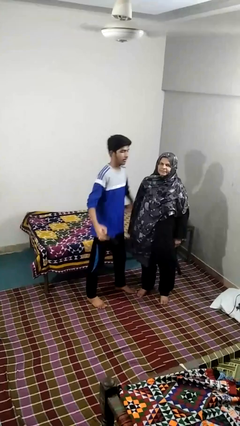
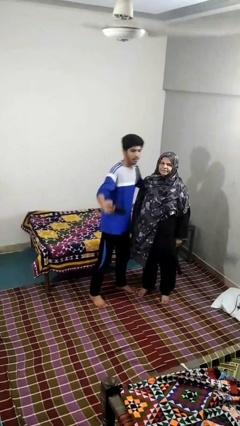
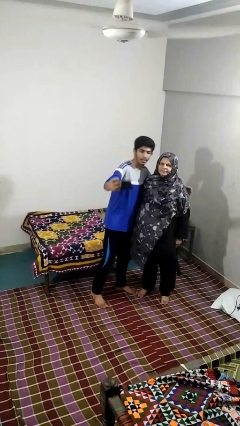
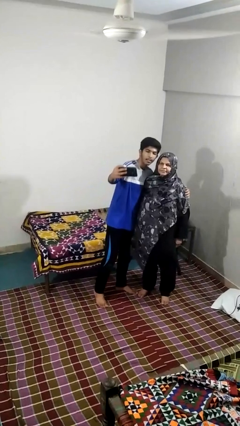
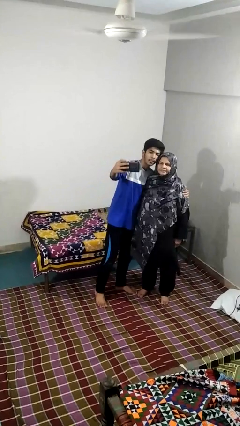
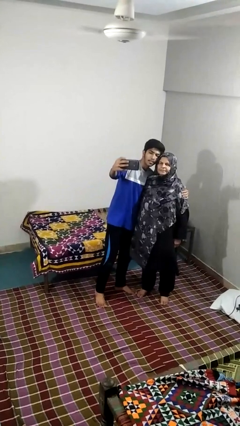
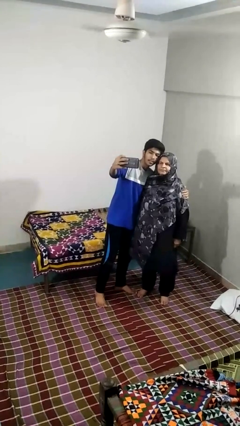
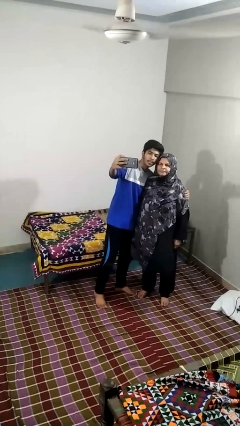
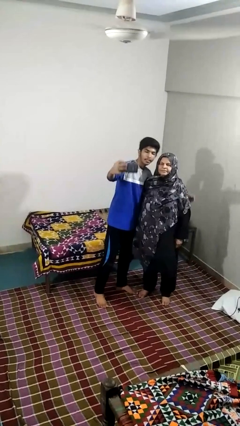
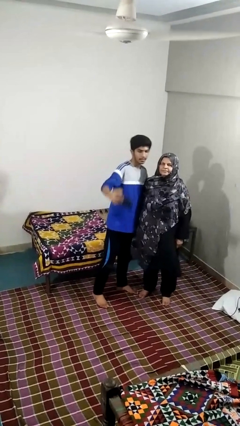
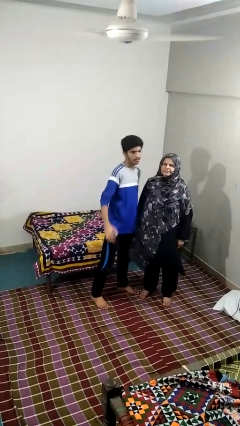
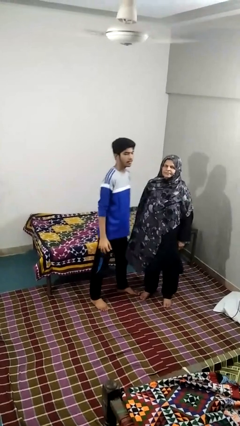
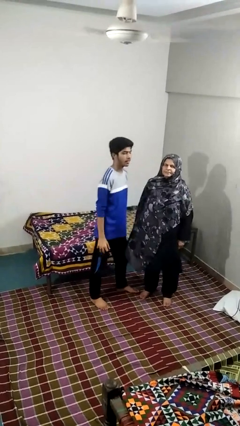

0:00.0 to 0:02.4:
person takes selfie with person

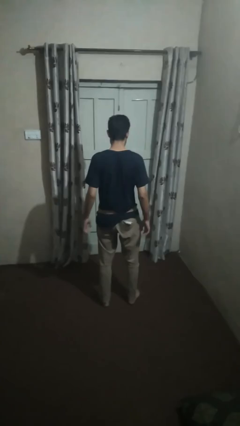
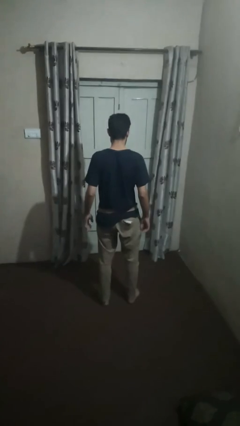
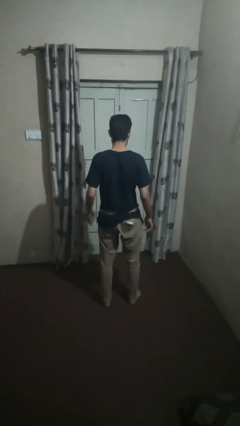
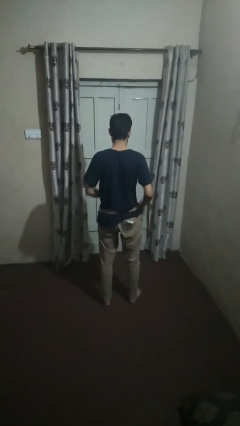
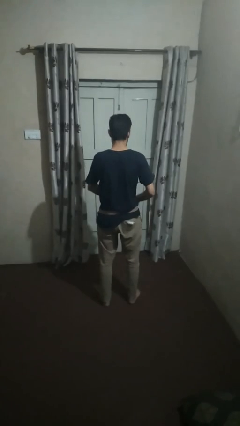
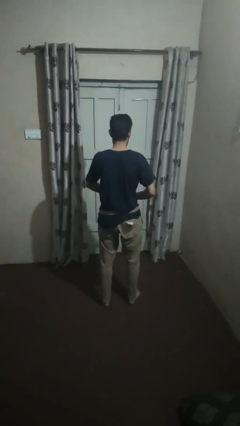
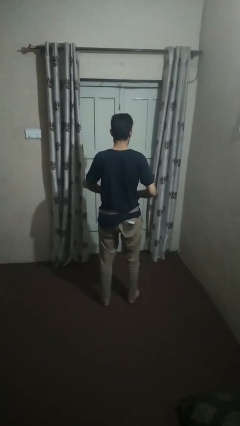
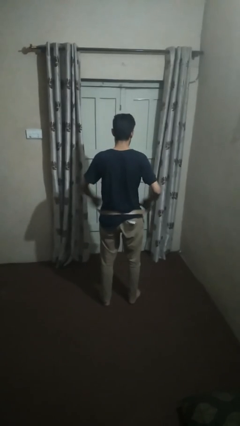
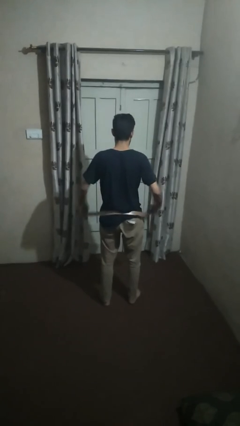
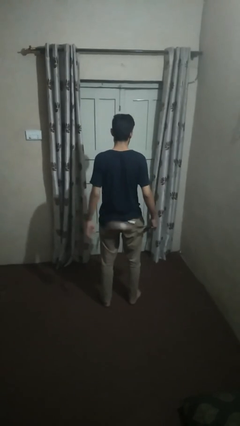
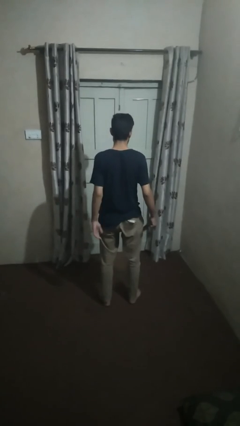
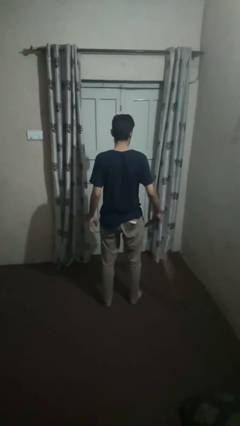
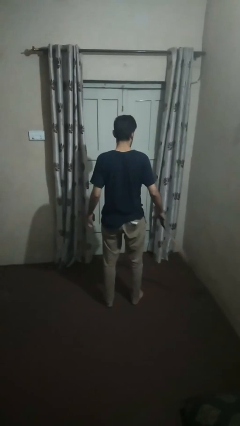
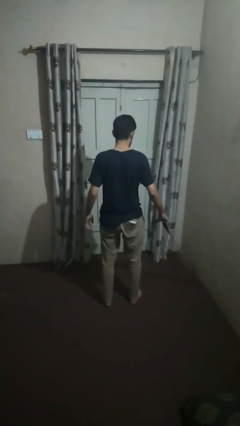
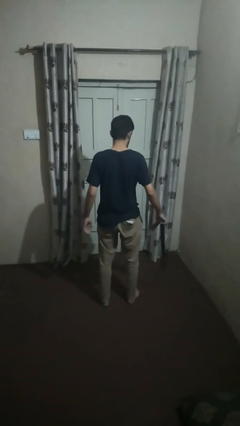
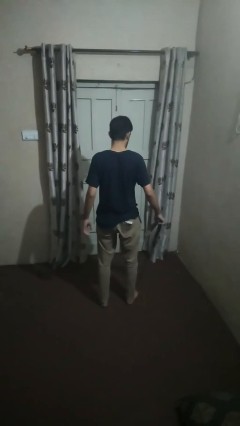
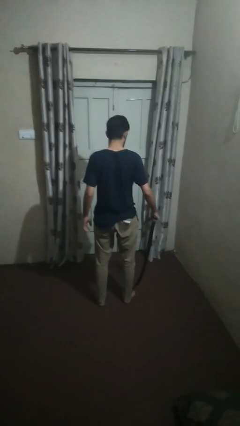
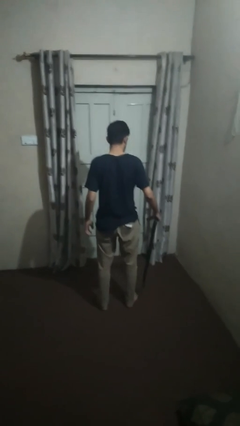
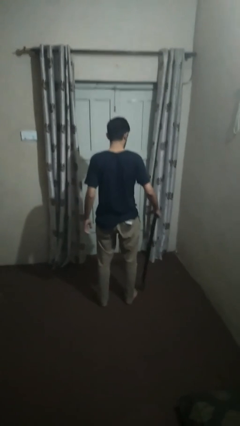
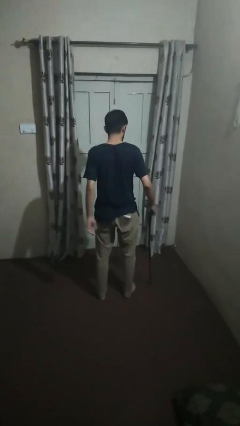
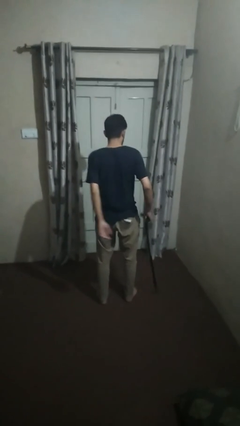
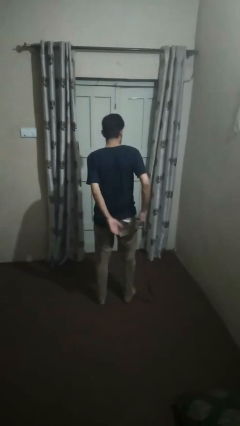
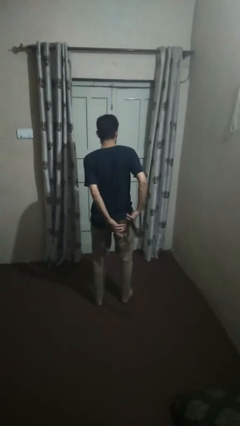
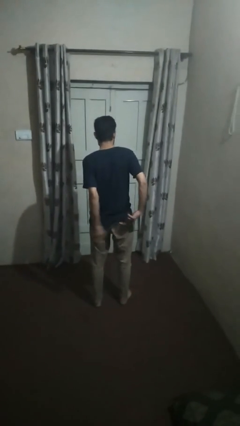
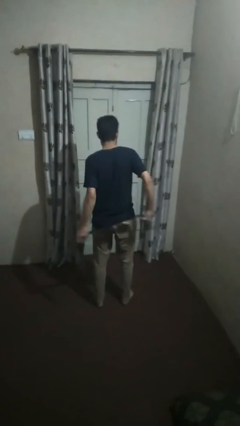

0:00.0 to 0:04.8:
person takes off belt

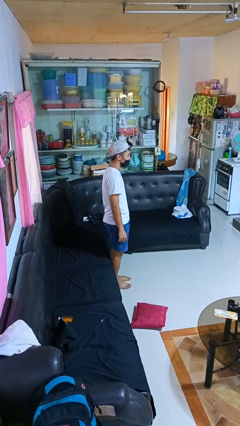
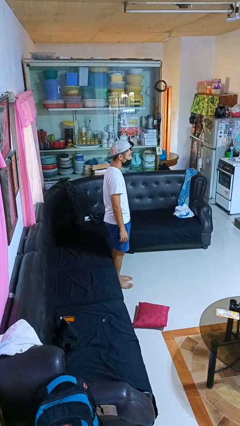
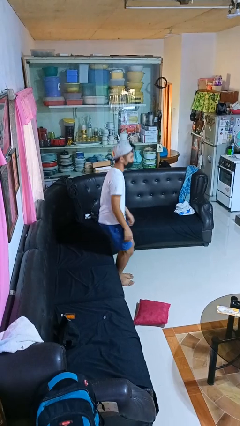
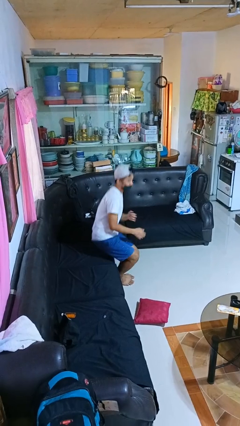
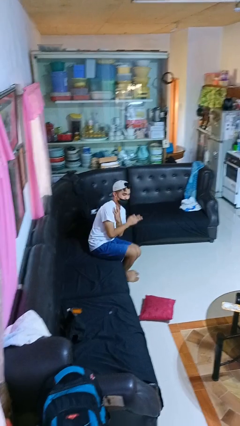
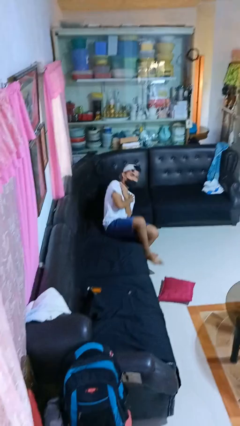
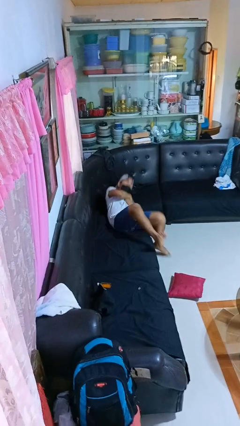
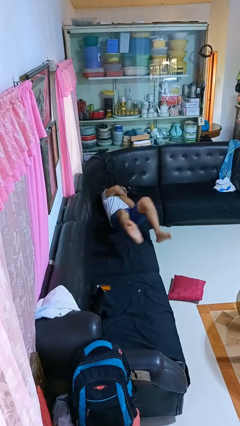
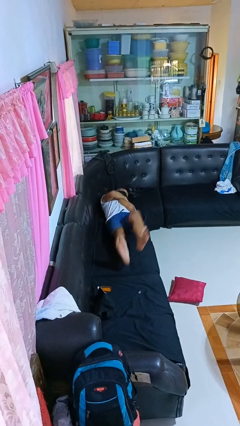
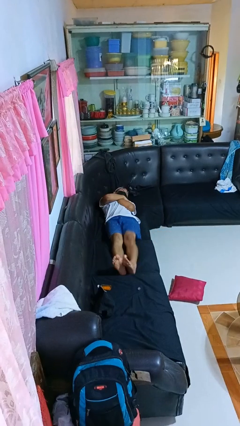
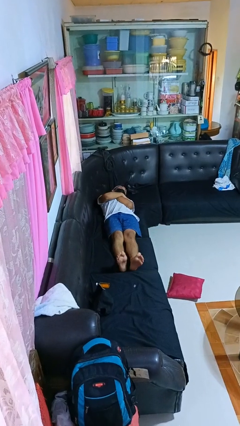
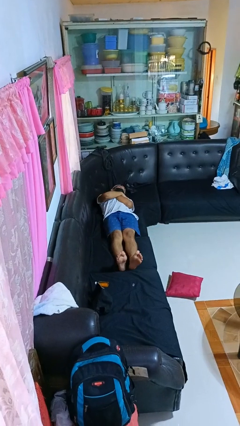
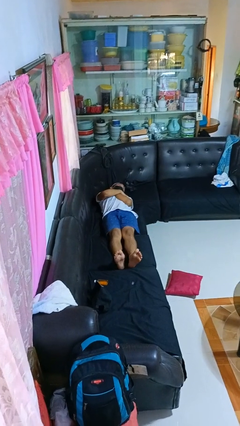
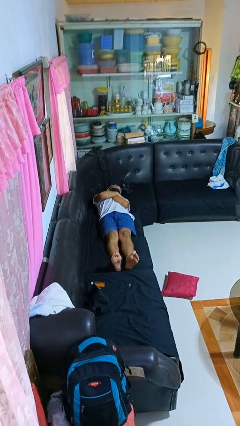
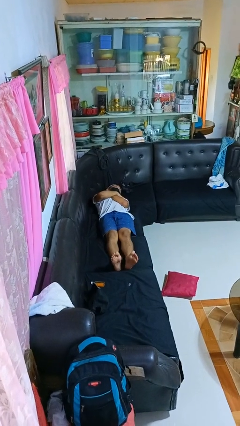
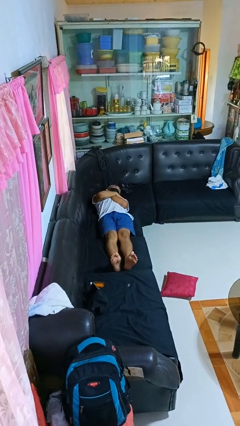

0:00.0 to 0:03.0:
person lies down on couch

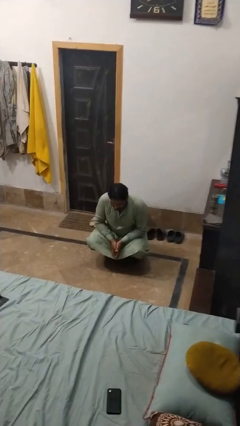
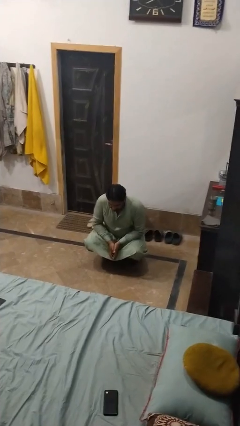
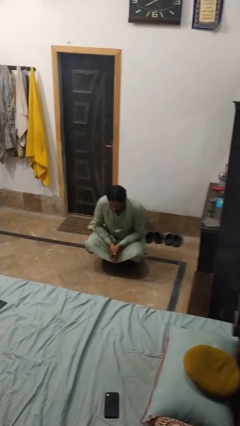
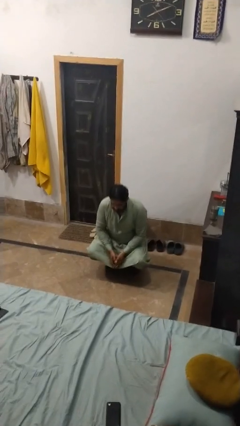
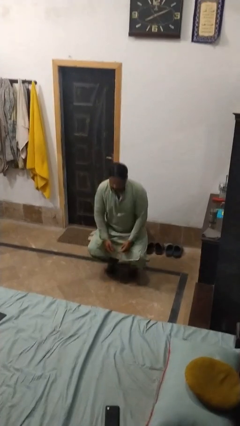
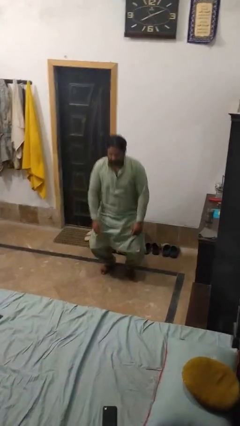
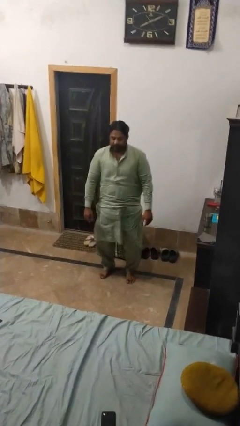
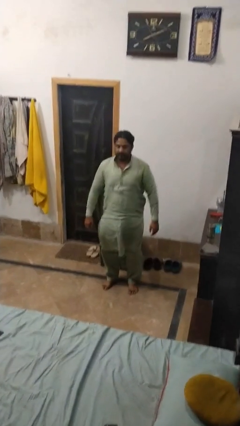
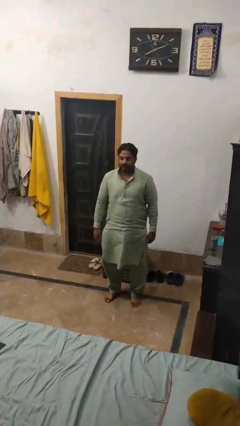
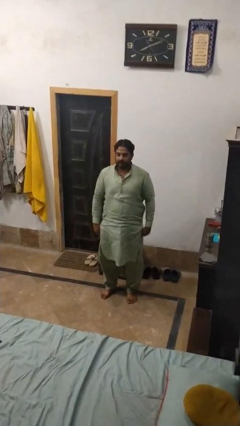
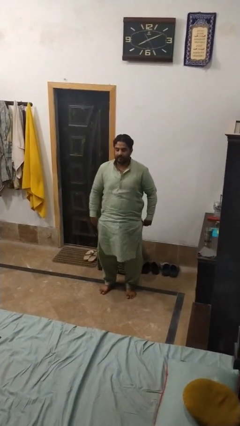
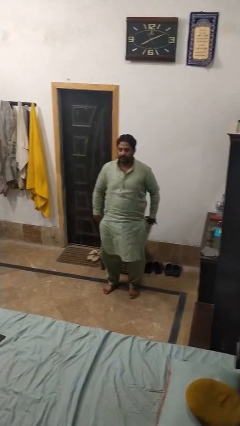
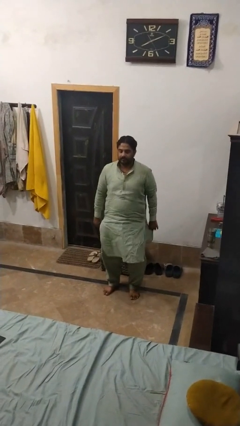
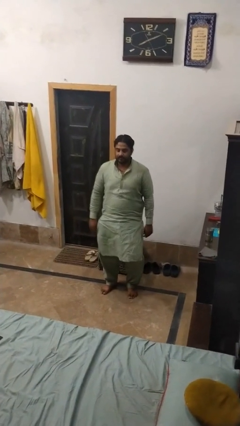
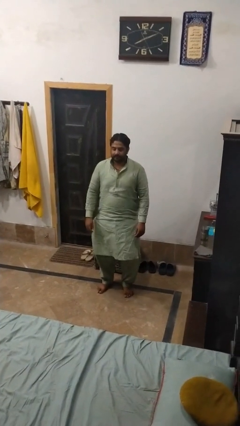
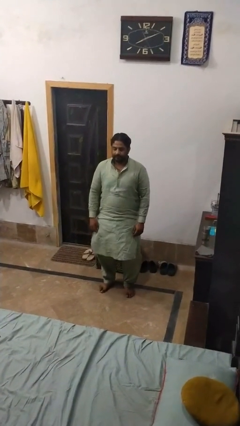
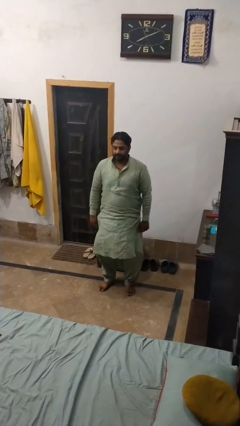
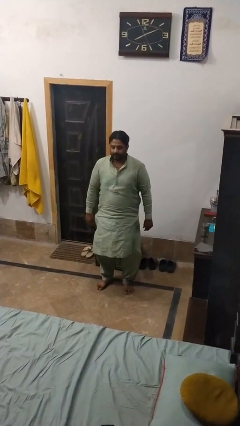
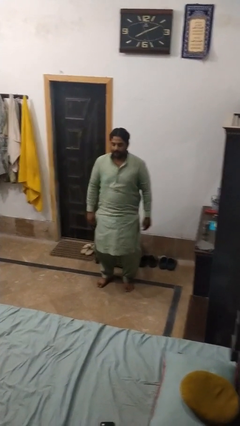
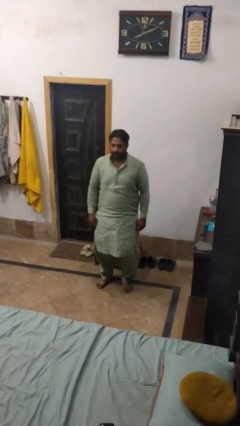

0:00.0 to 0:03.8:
person stands up

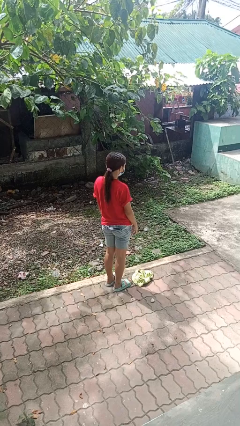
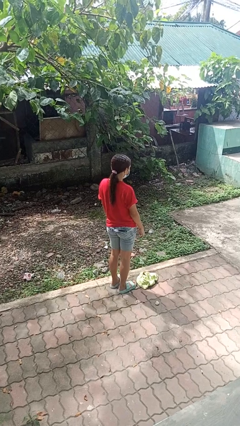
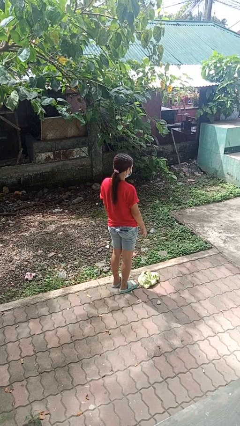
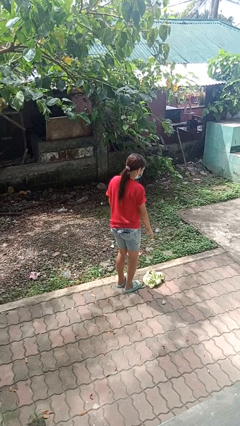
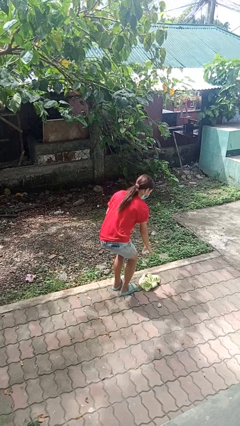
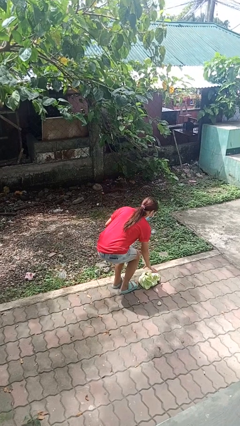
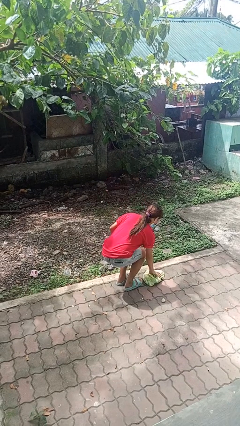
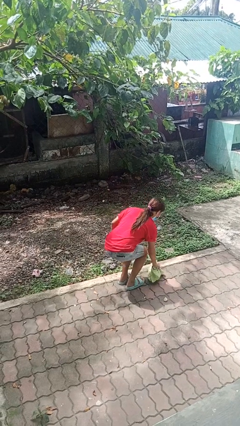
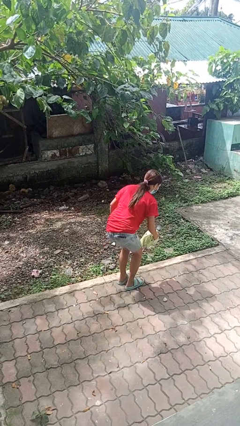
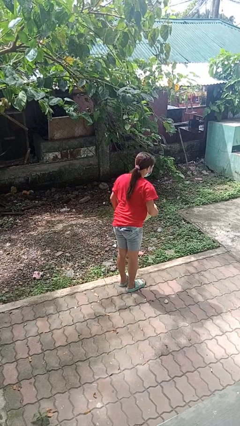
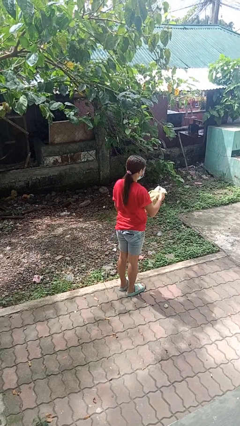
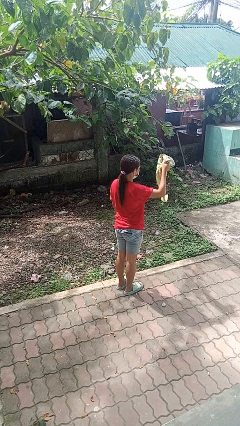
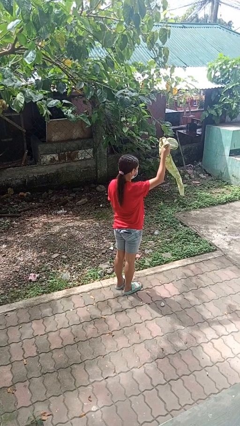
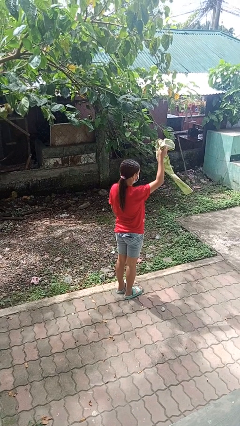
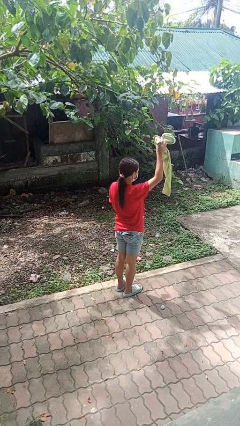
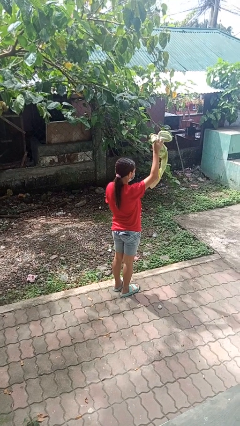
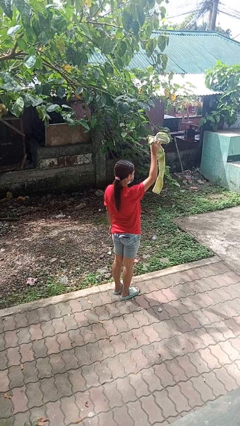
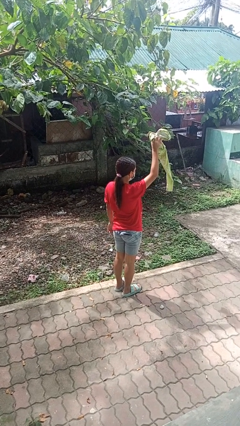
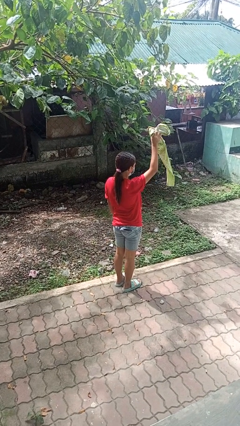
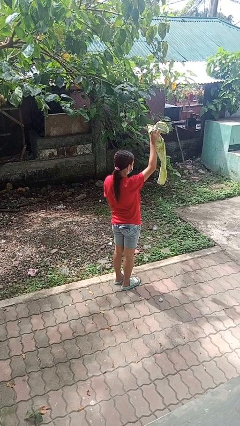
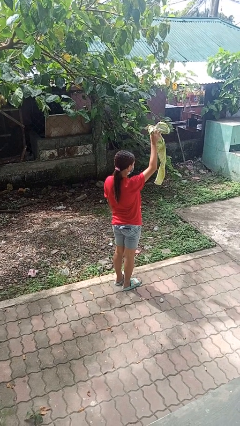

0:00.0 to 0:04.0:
person picks up object from floor
